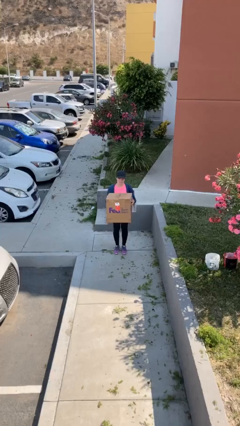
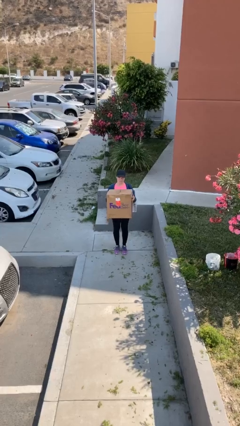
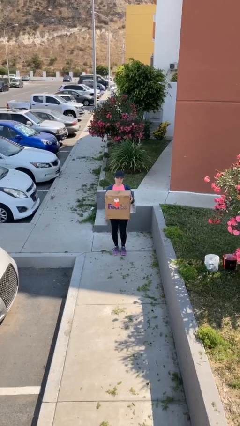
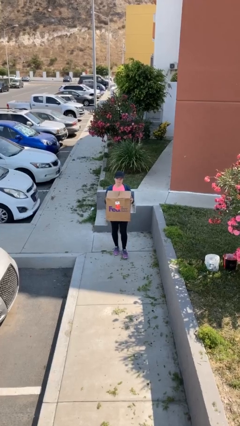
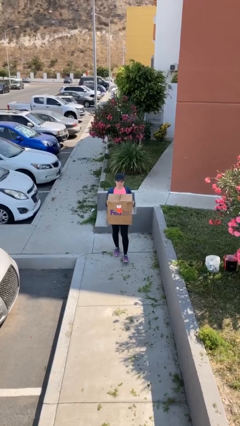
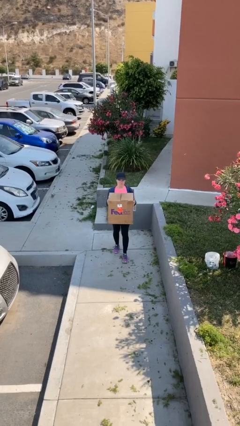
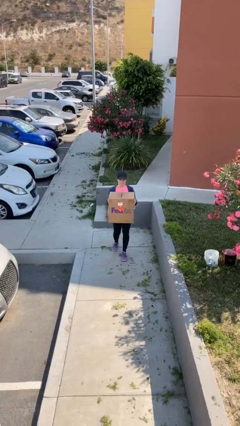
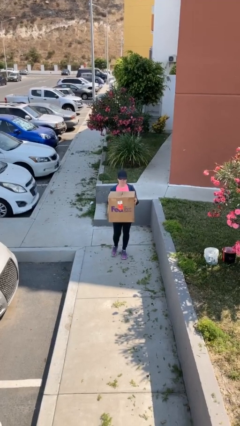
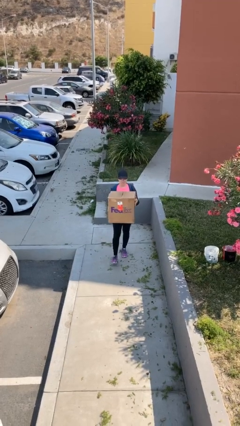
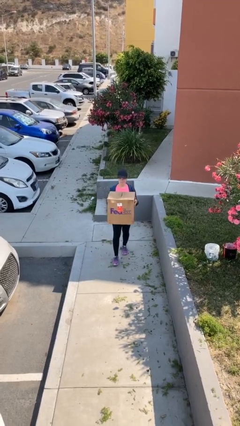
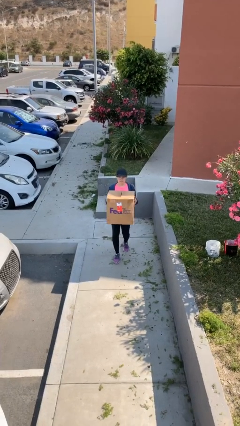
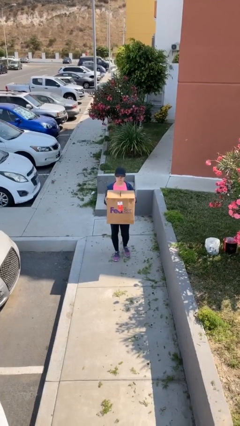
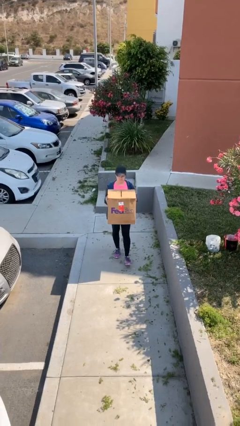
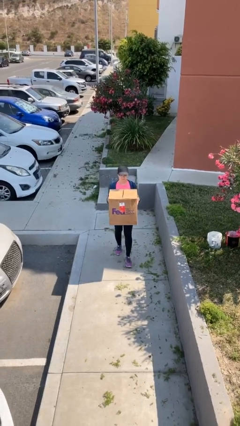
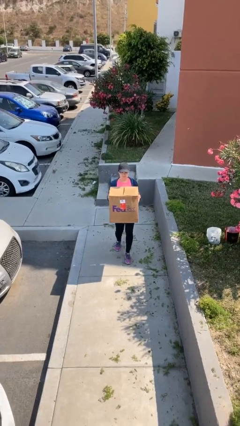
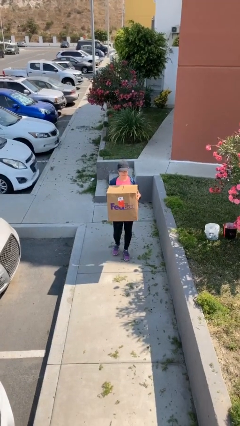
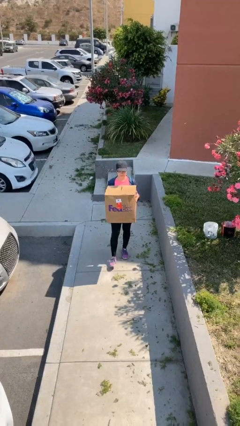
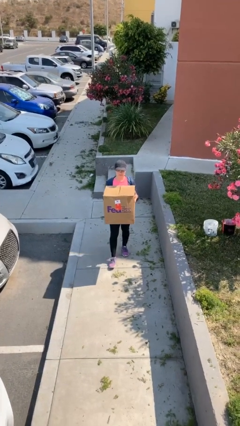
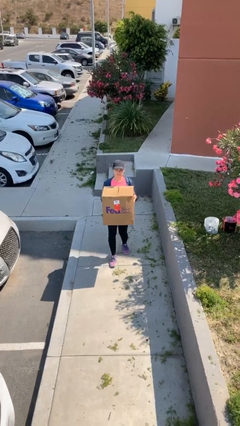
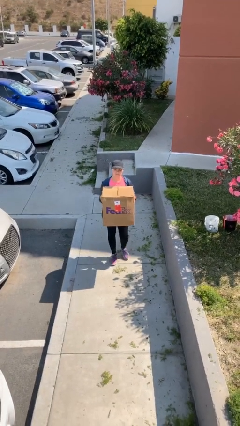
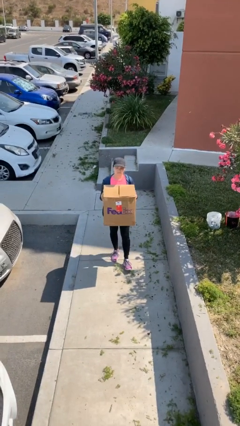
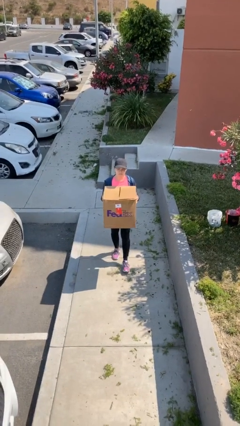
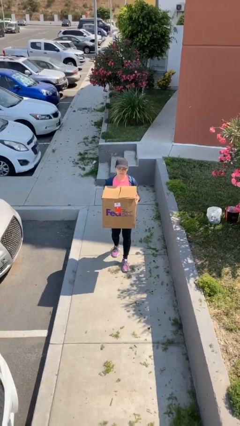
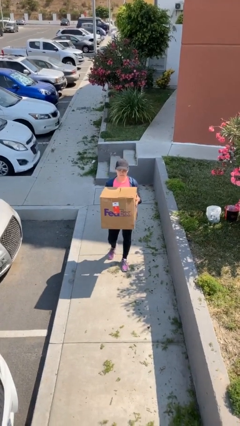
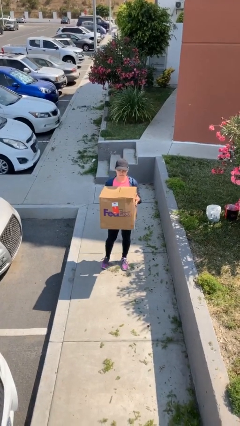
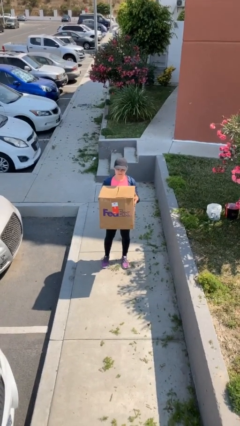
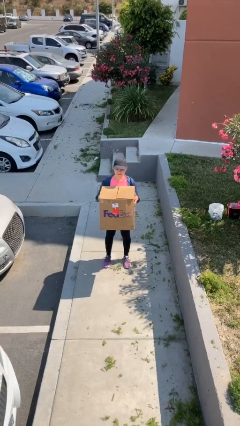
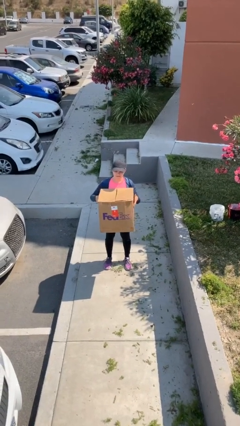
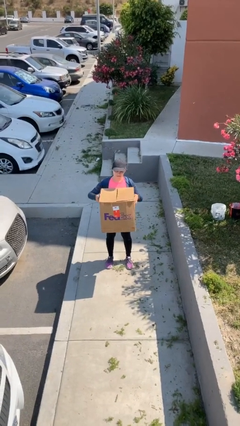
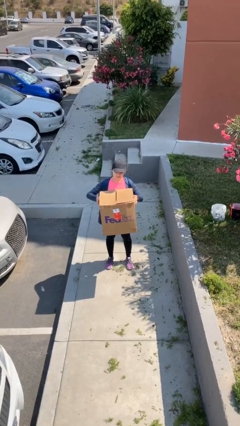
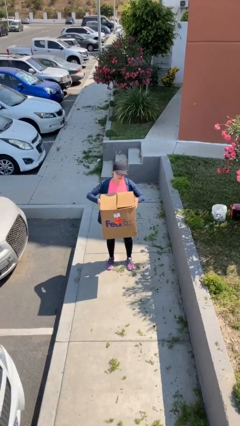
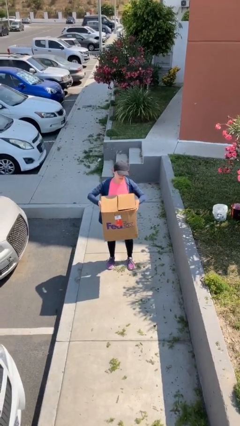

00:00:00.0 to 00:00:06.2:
person carries heavy object

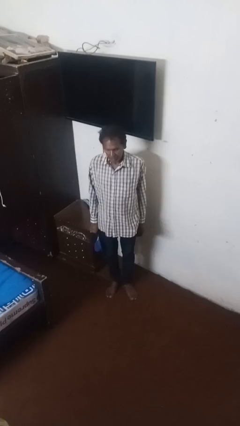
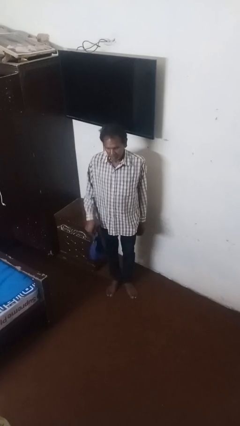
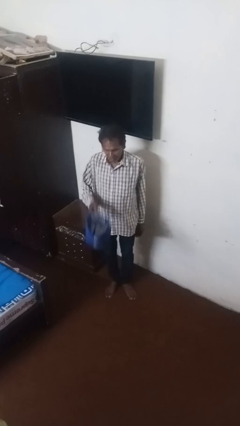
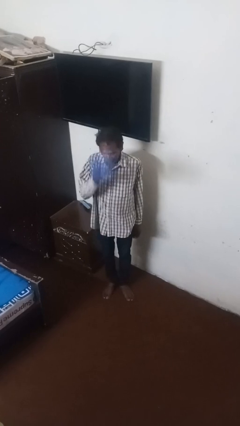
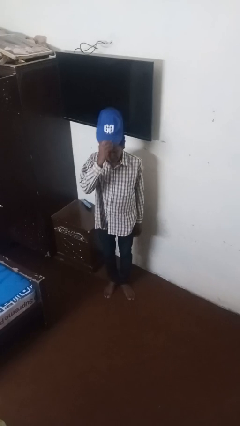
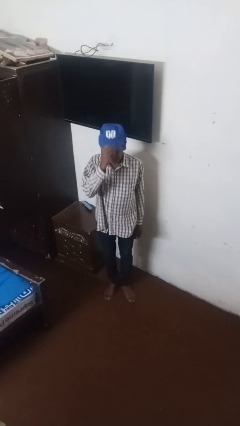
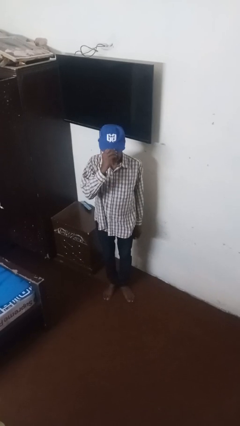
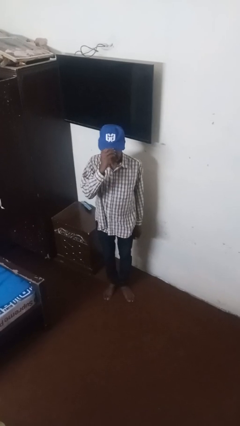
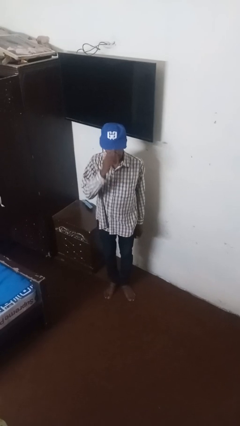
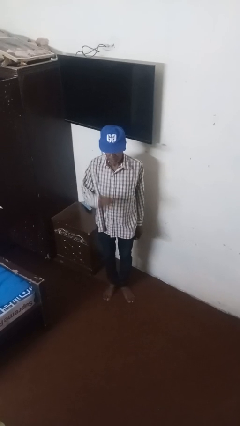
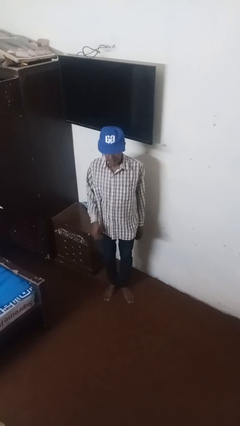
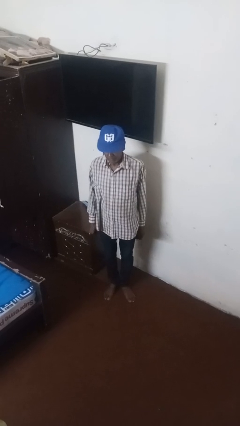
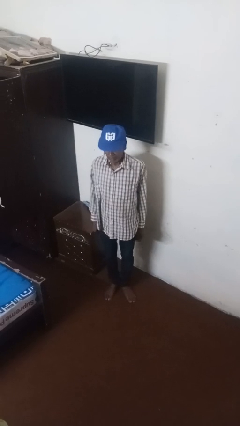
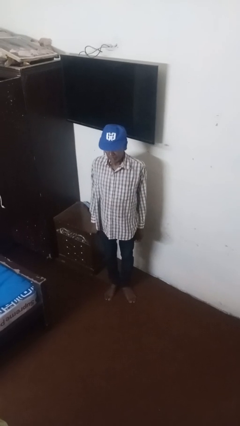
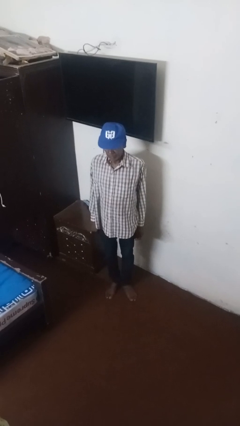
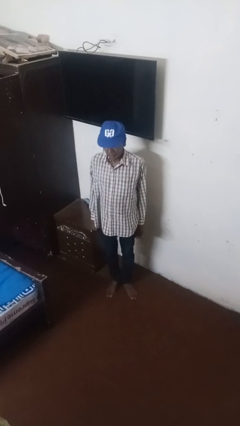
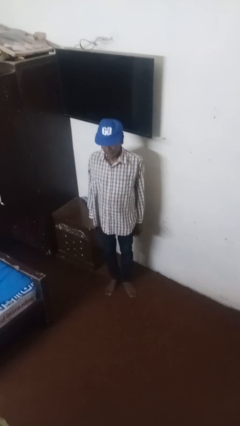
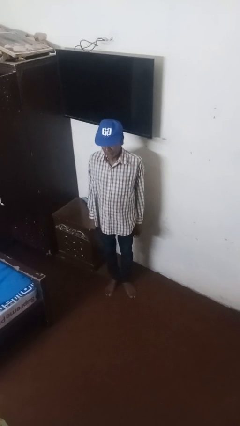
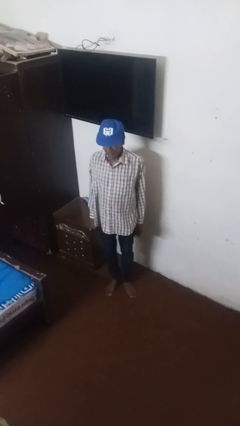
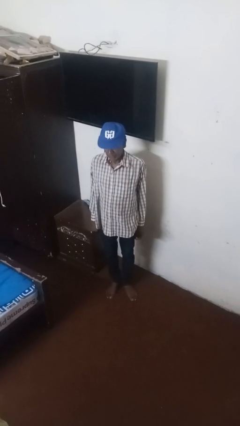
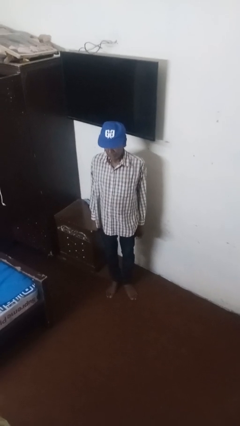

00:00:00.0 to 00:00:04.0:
person puts on hat

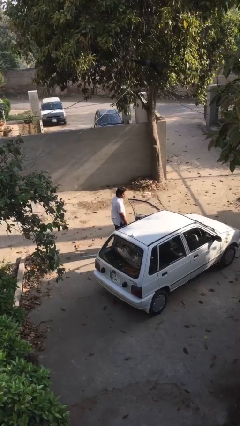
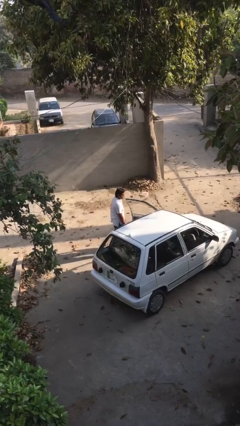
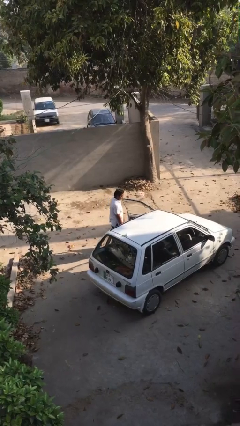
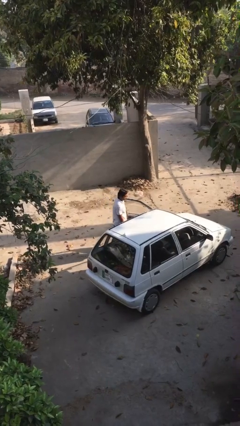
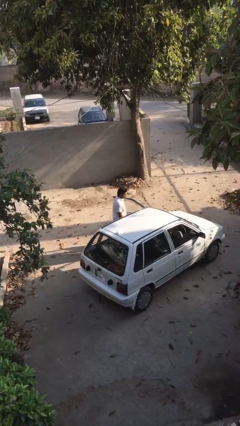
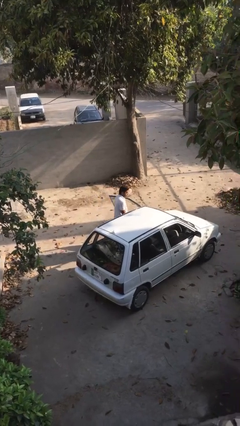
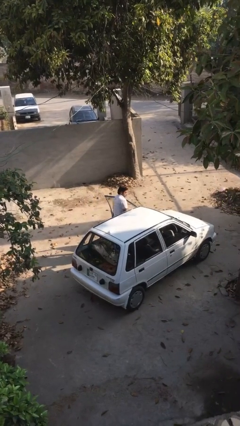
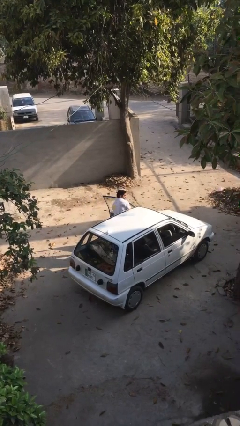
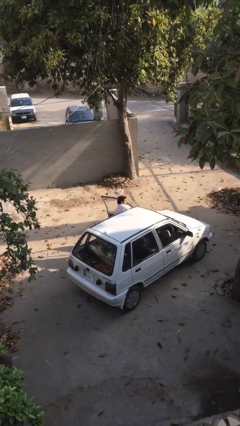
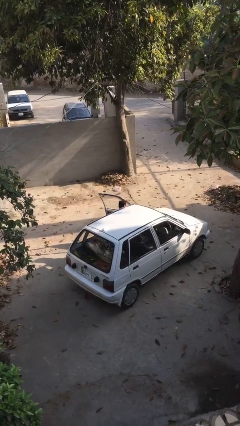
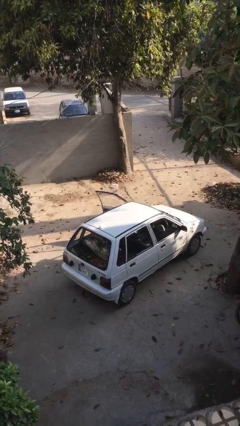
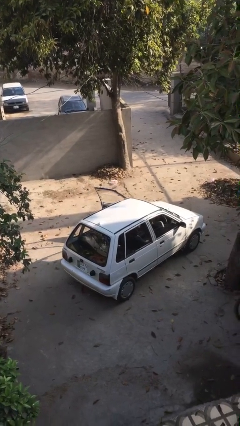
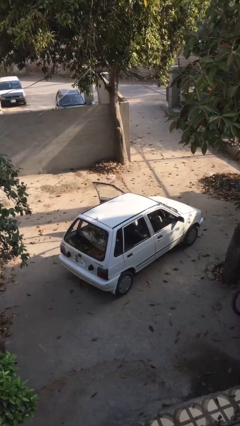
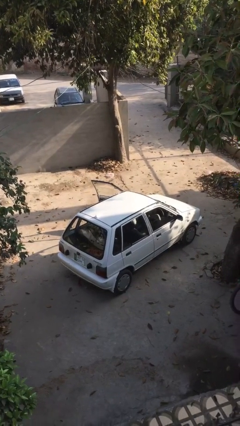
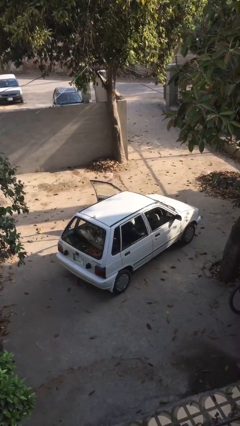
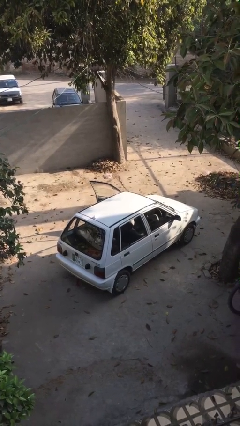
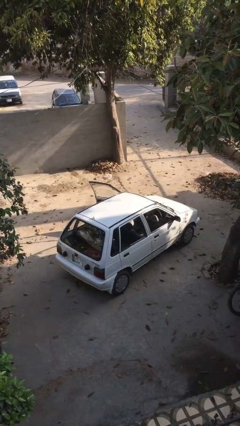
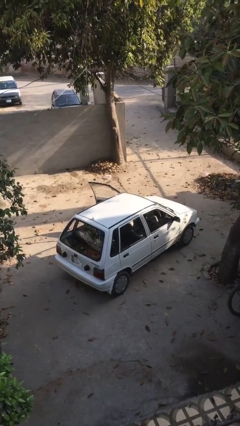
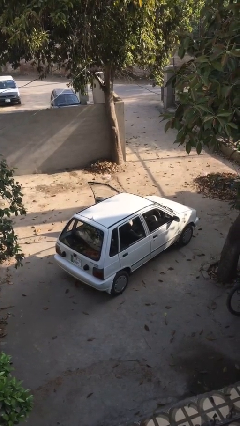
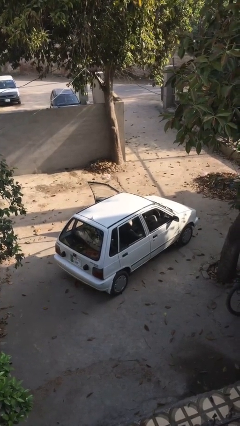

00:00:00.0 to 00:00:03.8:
person enters car

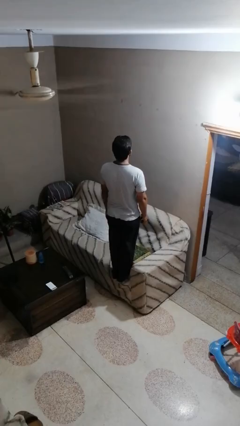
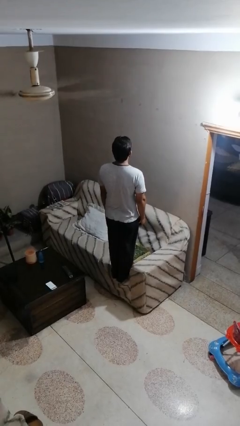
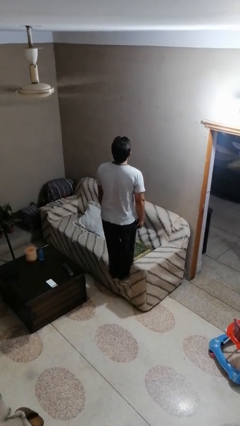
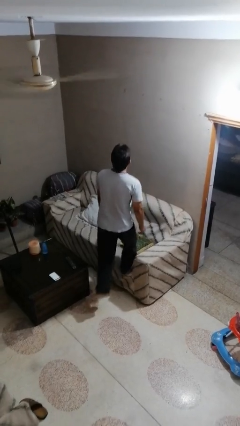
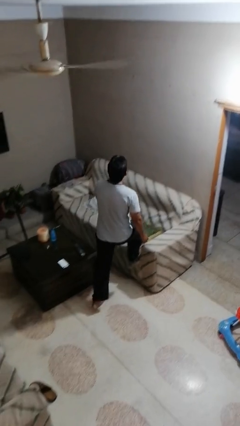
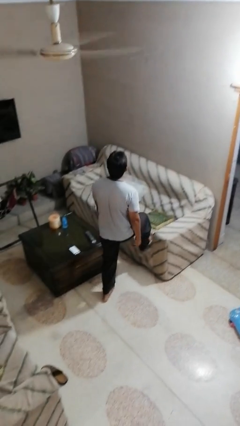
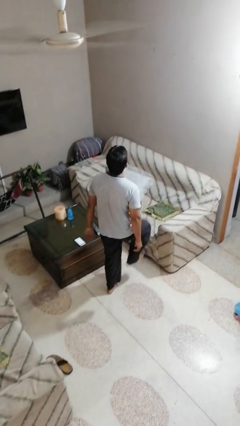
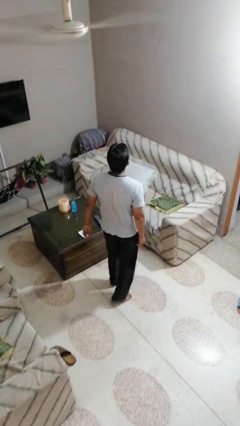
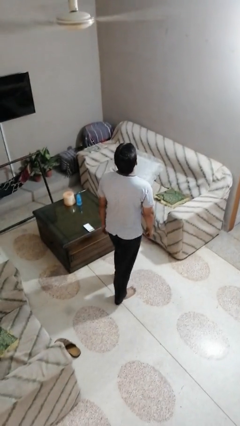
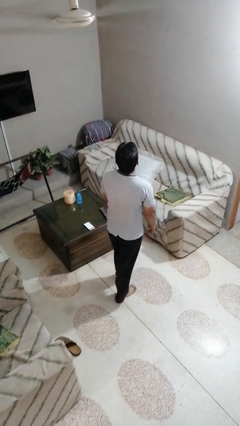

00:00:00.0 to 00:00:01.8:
person climbs off couch

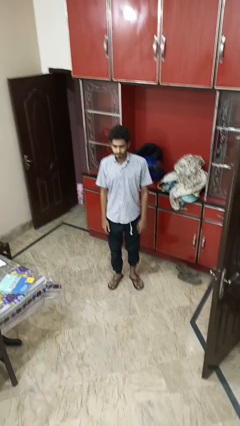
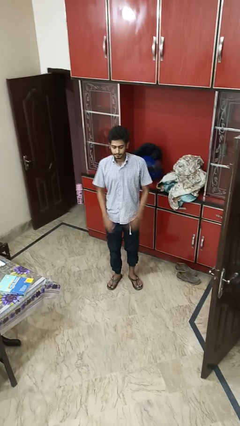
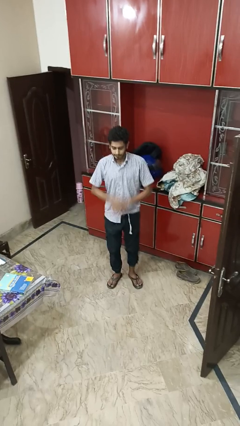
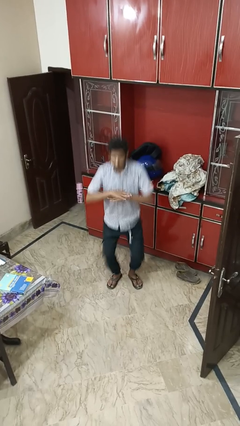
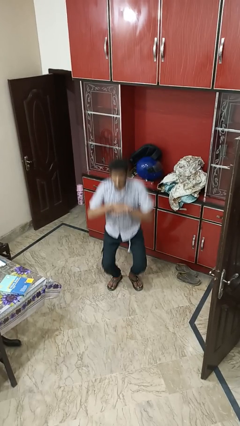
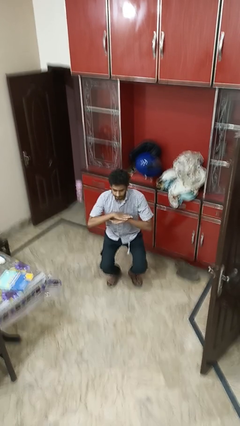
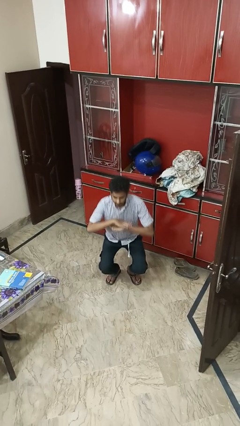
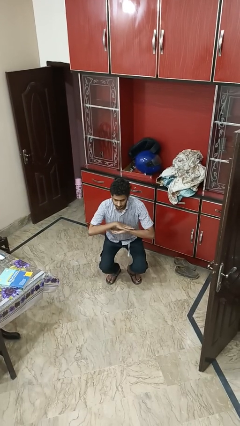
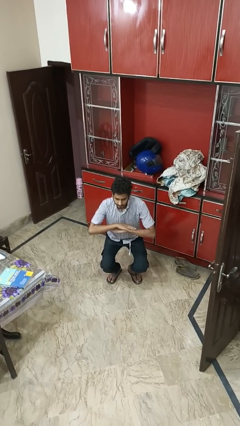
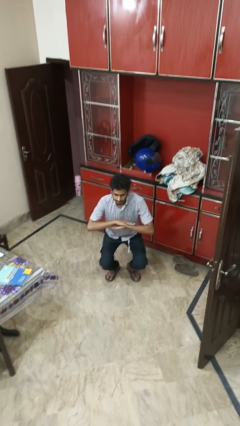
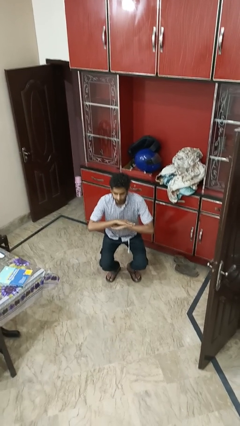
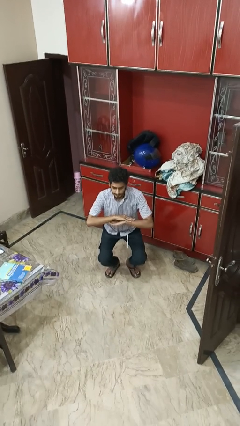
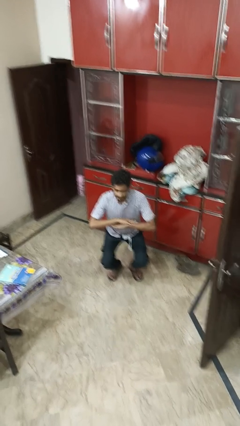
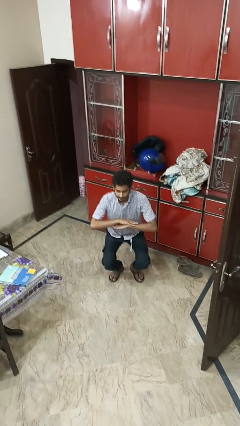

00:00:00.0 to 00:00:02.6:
person squats
